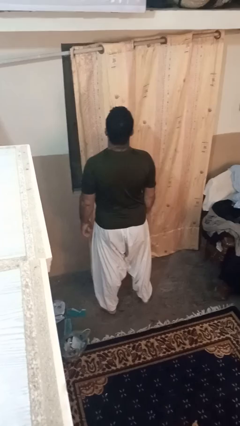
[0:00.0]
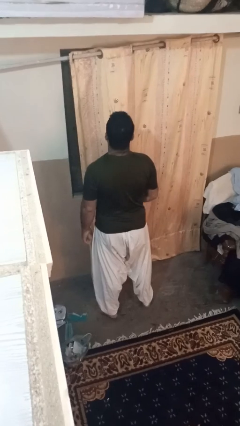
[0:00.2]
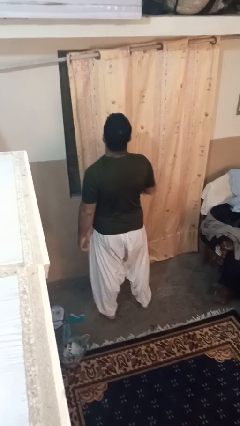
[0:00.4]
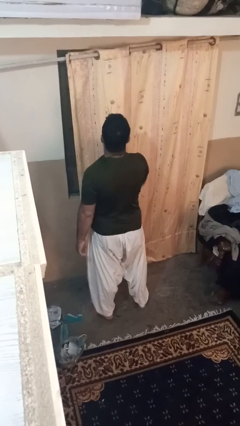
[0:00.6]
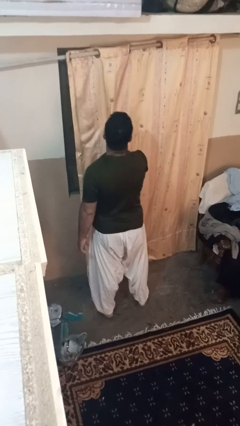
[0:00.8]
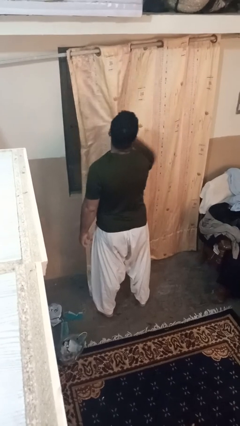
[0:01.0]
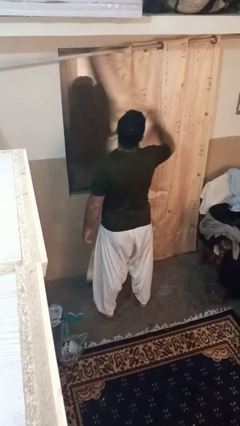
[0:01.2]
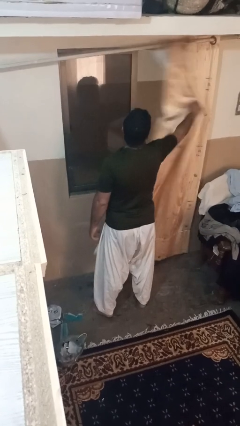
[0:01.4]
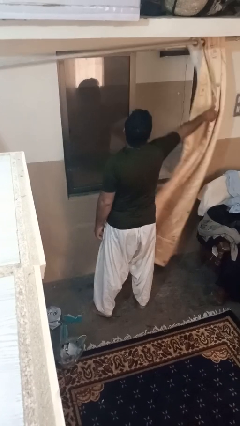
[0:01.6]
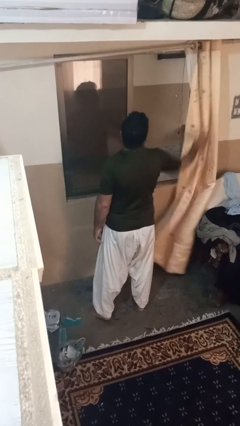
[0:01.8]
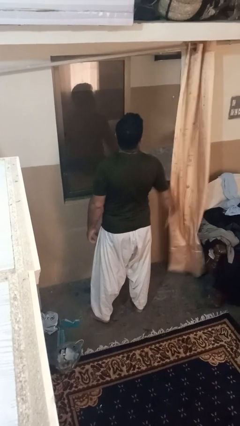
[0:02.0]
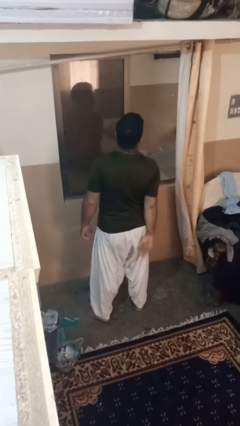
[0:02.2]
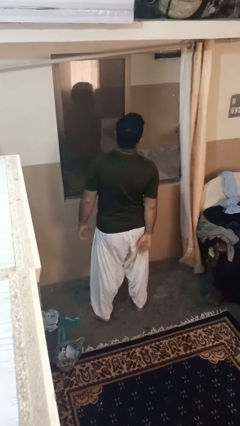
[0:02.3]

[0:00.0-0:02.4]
person opens curtains

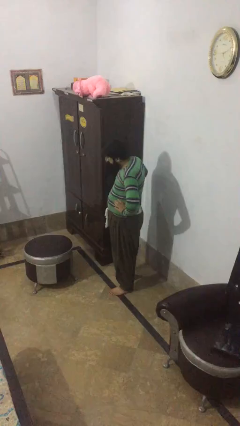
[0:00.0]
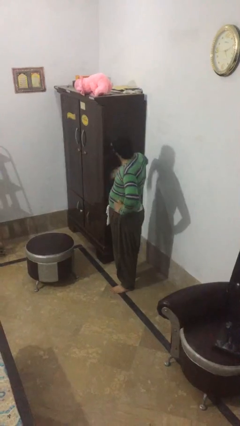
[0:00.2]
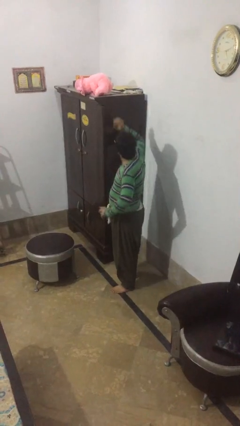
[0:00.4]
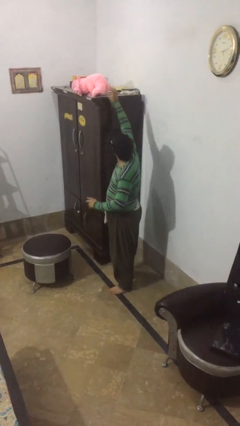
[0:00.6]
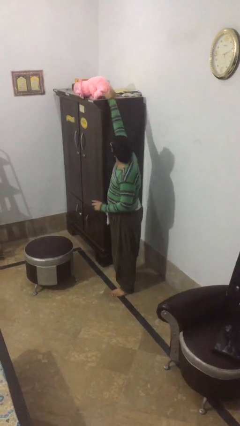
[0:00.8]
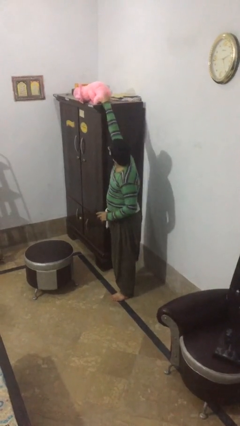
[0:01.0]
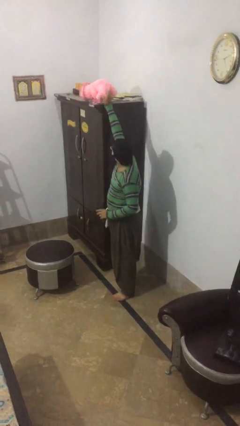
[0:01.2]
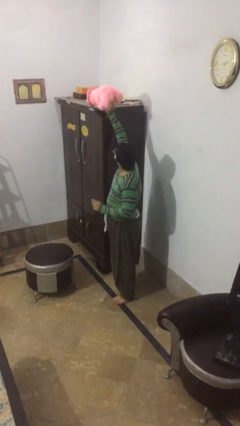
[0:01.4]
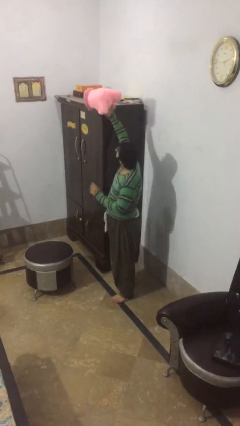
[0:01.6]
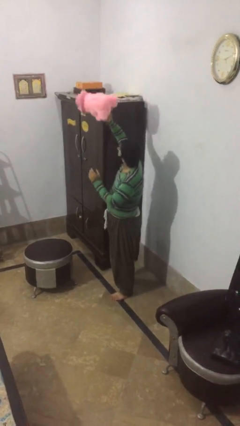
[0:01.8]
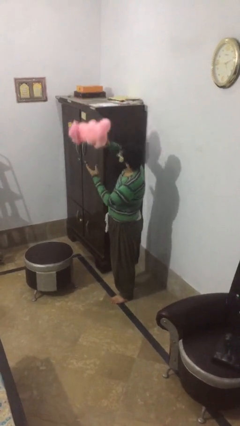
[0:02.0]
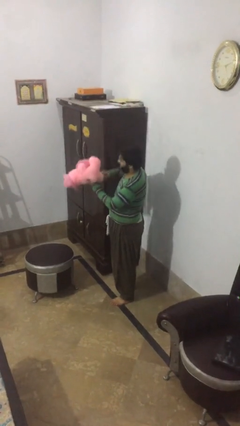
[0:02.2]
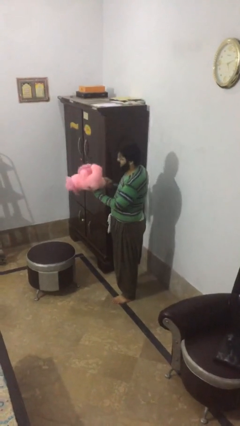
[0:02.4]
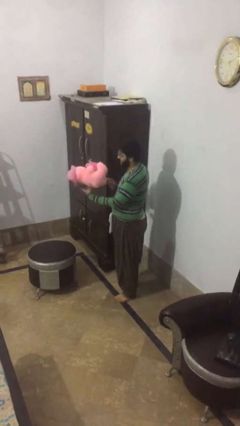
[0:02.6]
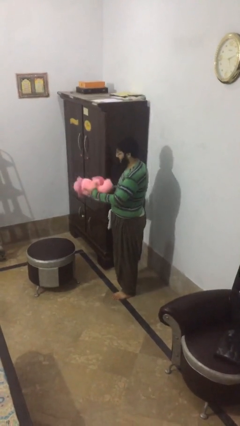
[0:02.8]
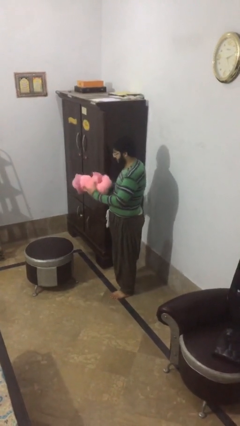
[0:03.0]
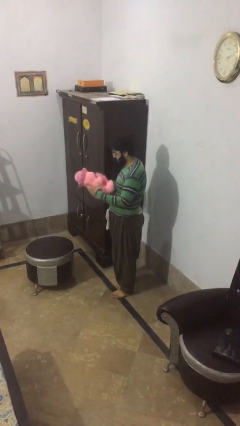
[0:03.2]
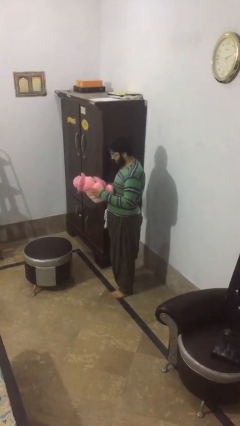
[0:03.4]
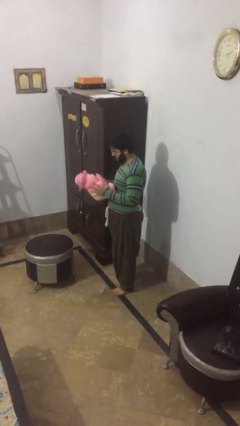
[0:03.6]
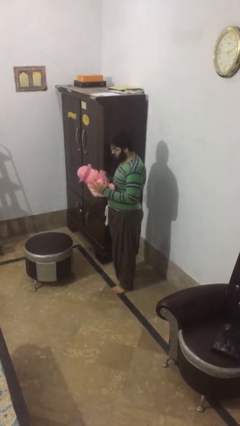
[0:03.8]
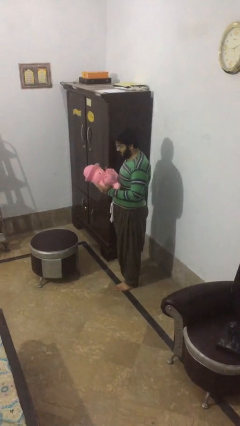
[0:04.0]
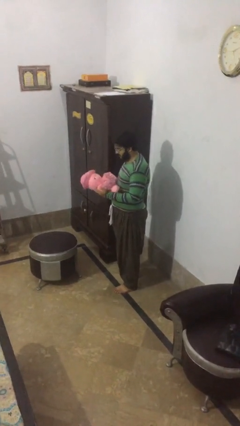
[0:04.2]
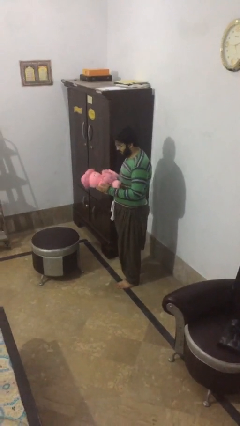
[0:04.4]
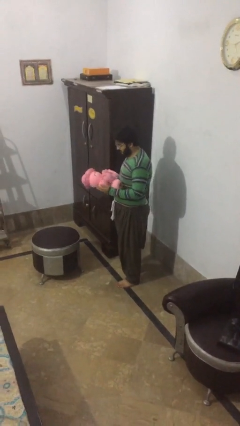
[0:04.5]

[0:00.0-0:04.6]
person picks up object from shelf

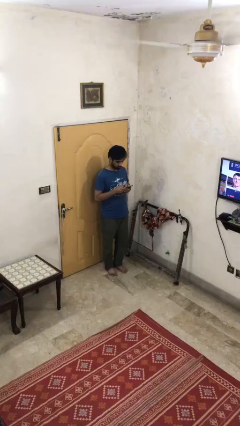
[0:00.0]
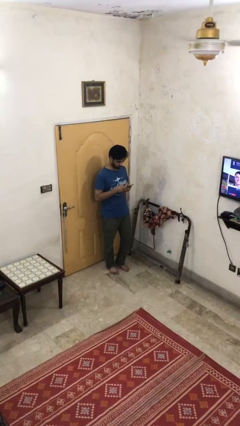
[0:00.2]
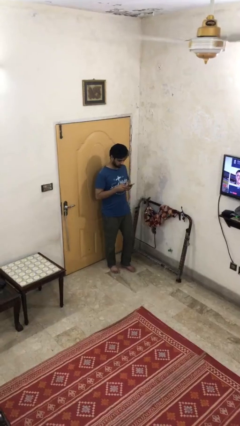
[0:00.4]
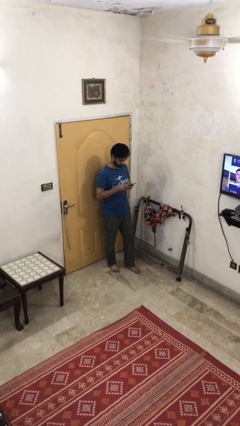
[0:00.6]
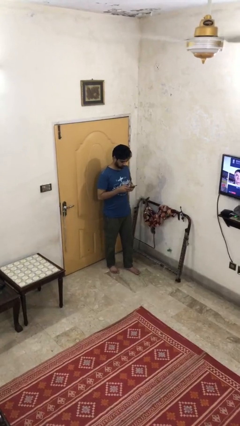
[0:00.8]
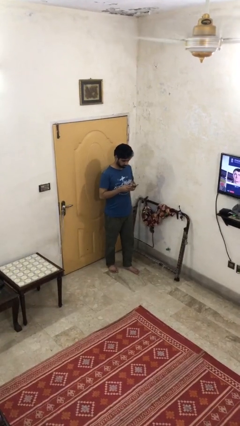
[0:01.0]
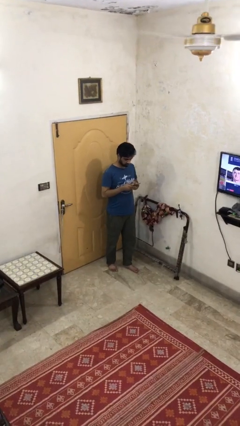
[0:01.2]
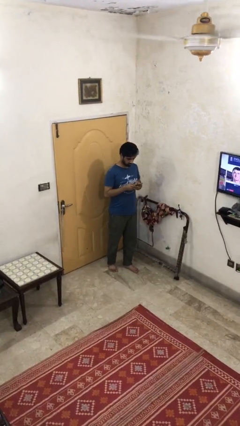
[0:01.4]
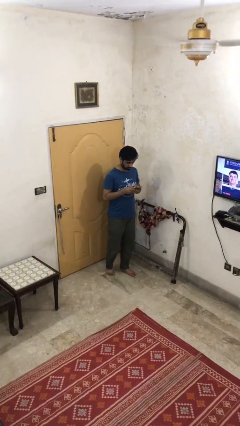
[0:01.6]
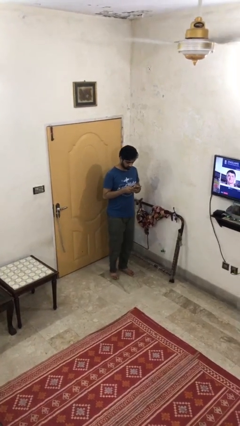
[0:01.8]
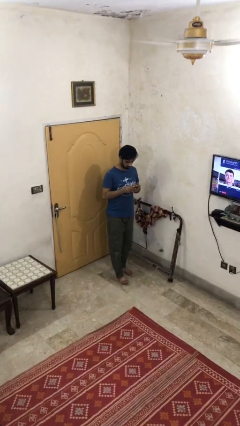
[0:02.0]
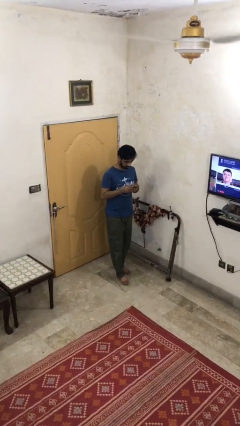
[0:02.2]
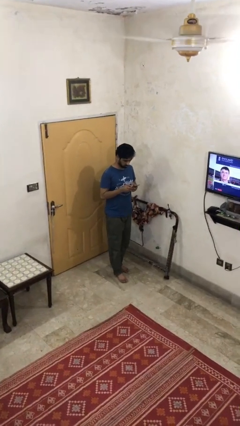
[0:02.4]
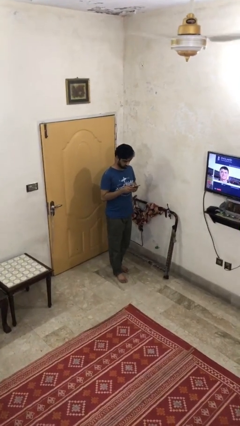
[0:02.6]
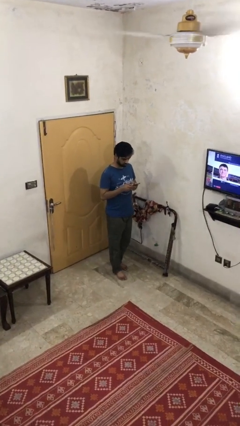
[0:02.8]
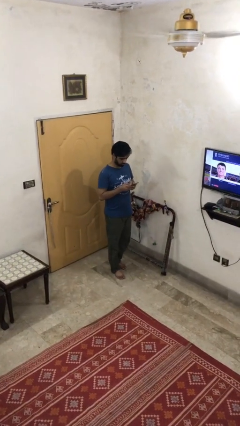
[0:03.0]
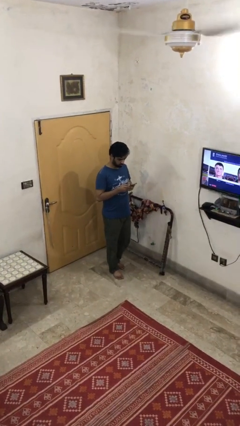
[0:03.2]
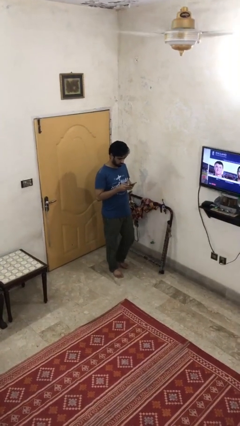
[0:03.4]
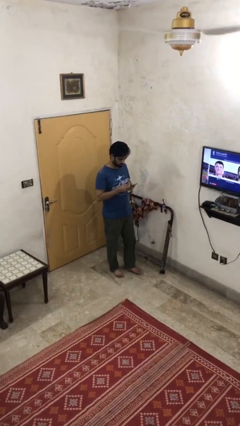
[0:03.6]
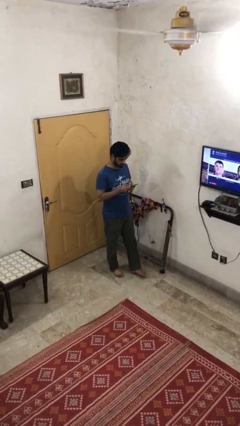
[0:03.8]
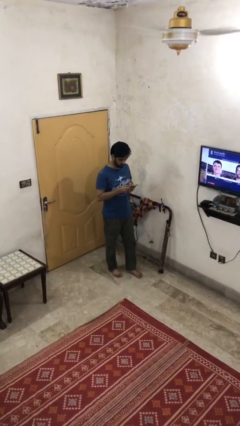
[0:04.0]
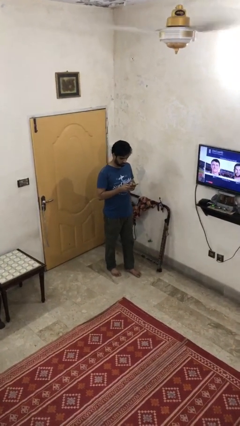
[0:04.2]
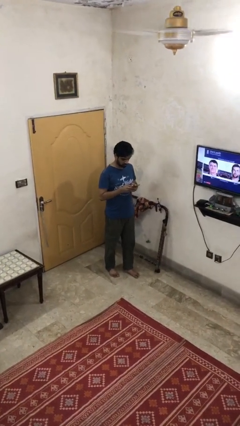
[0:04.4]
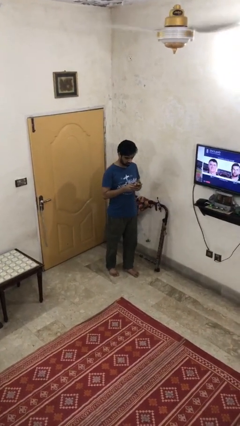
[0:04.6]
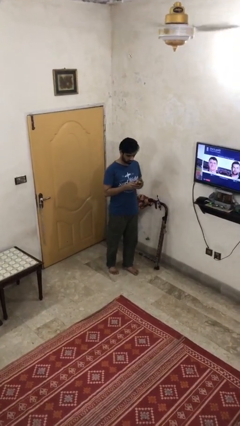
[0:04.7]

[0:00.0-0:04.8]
person texts on phone

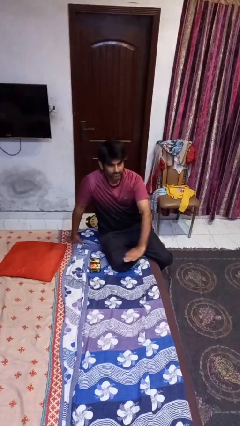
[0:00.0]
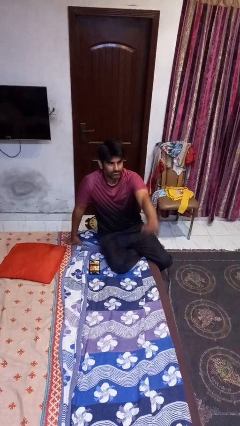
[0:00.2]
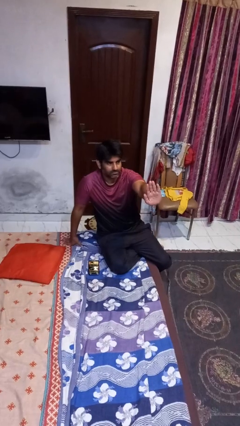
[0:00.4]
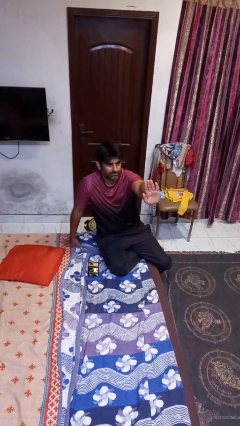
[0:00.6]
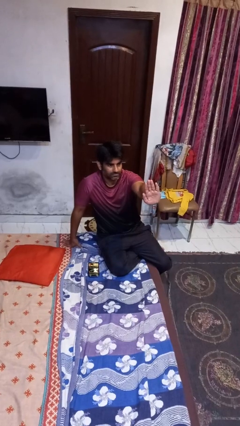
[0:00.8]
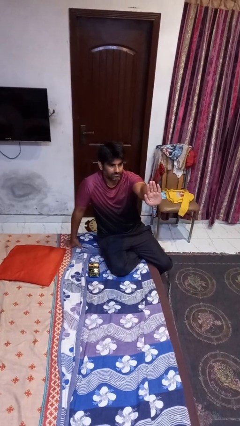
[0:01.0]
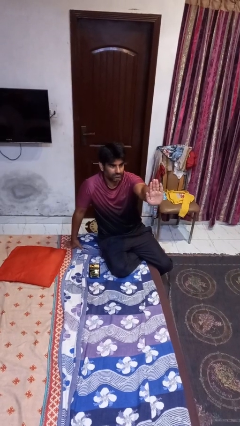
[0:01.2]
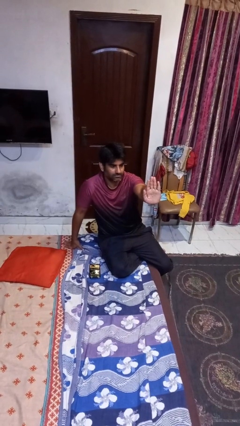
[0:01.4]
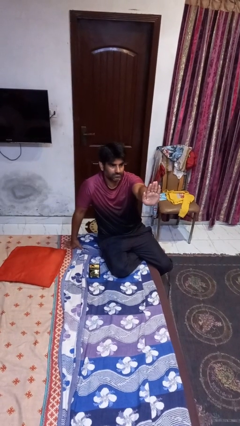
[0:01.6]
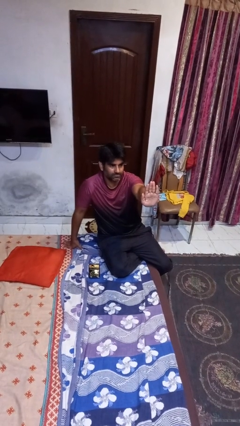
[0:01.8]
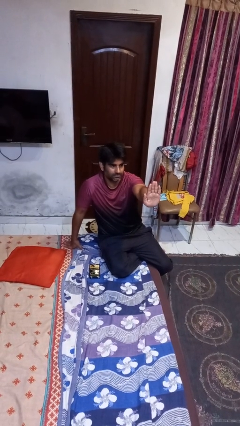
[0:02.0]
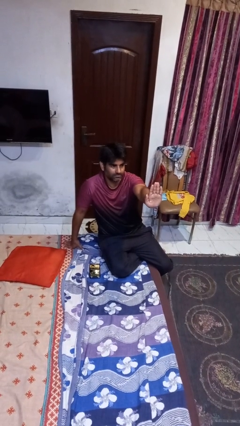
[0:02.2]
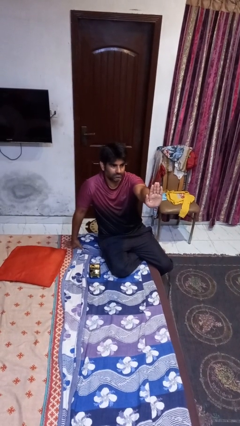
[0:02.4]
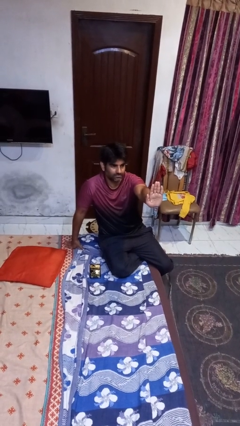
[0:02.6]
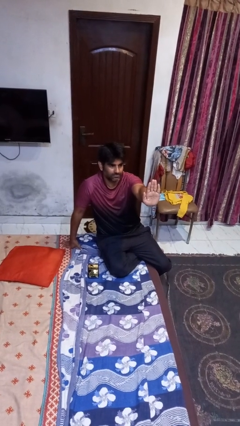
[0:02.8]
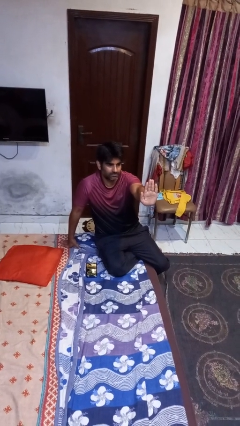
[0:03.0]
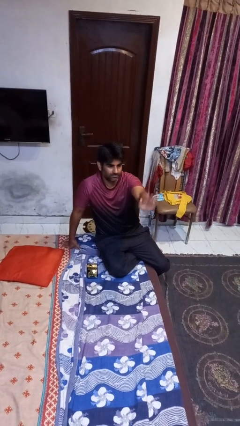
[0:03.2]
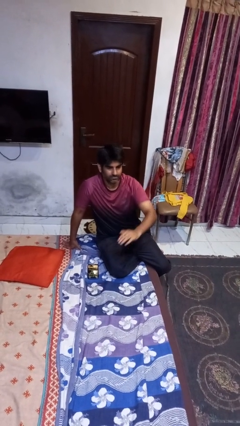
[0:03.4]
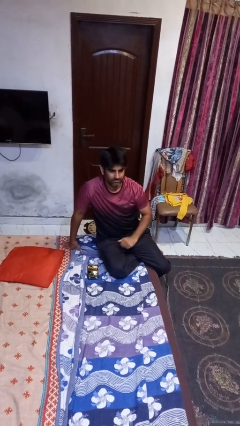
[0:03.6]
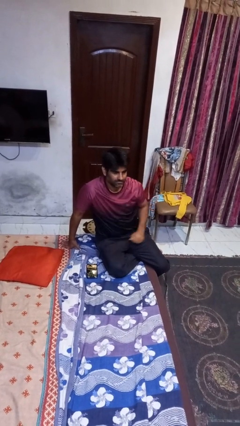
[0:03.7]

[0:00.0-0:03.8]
person gestures stop

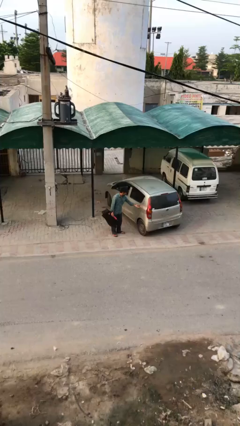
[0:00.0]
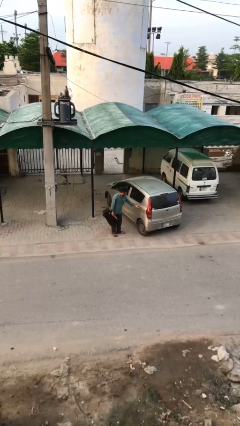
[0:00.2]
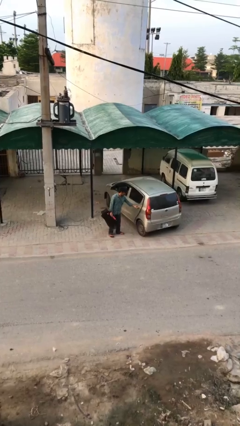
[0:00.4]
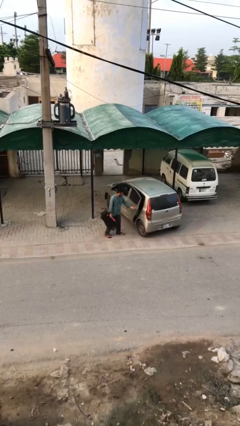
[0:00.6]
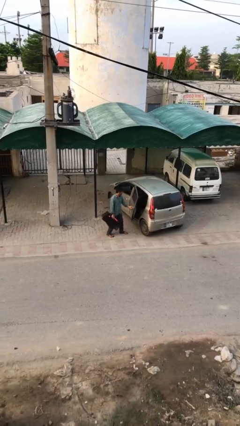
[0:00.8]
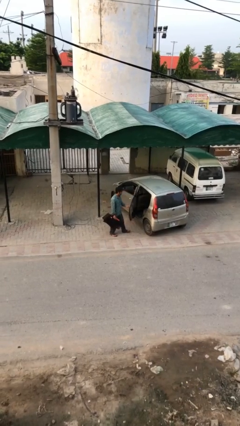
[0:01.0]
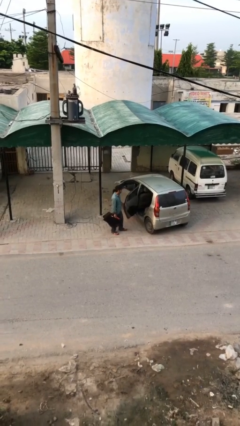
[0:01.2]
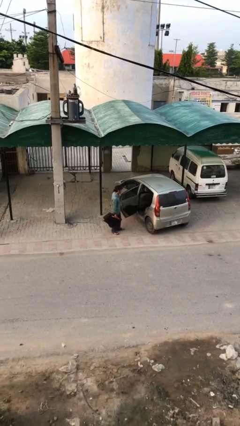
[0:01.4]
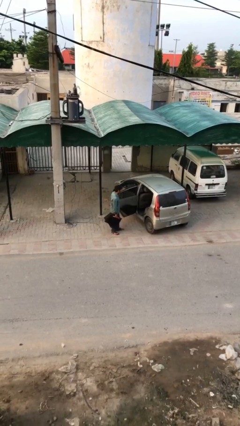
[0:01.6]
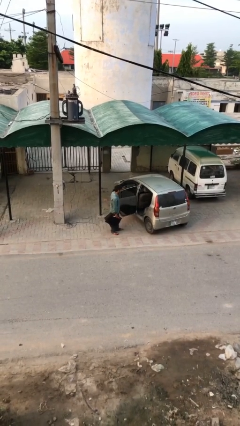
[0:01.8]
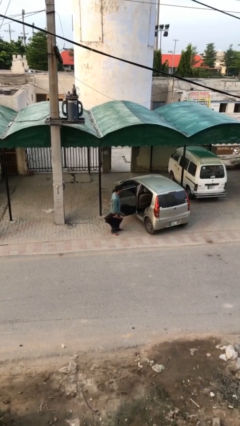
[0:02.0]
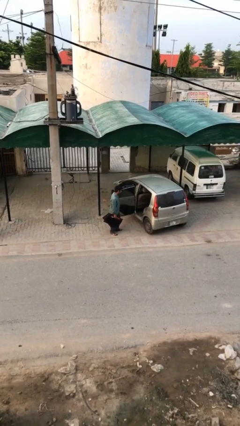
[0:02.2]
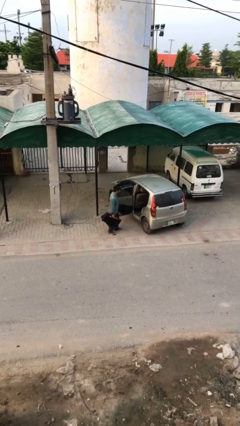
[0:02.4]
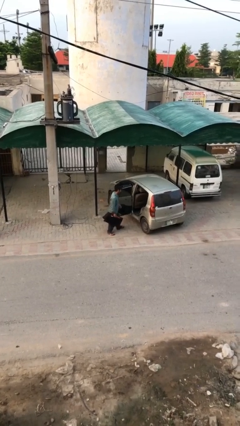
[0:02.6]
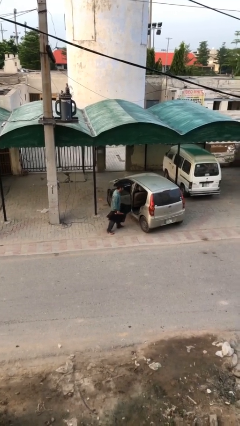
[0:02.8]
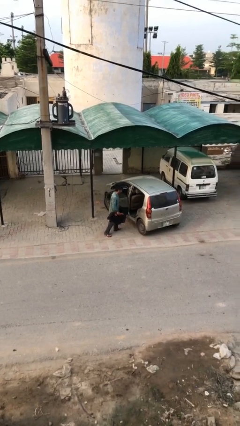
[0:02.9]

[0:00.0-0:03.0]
person opens car door
